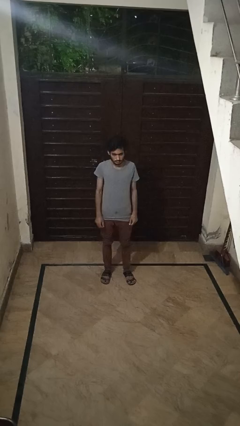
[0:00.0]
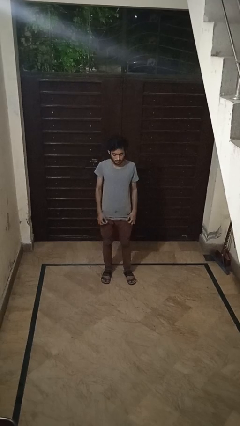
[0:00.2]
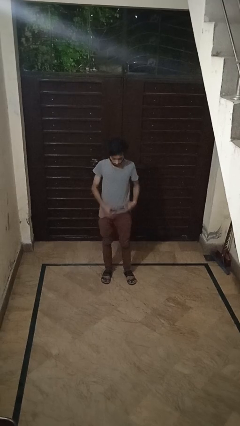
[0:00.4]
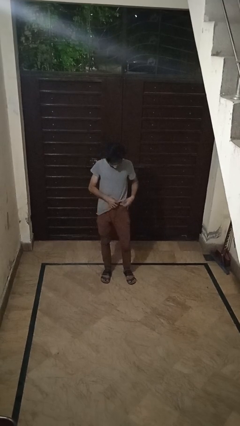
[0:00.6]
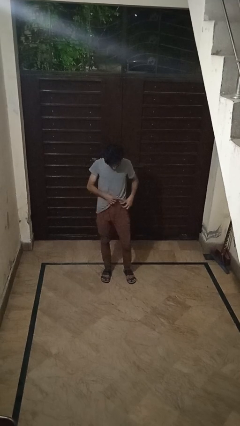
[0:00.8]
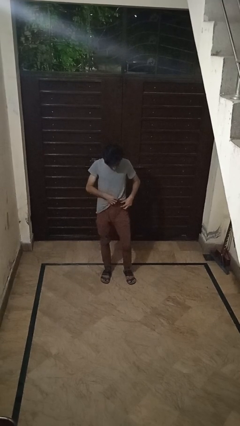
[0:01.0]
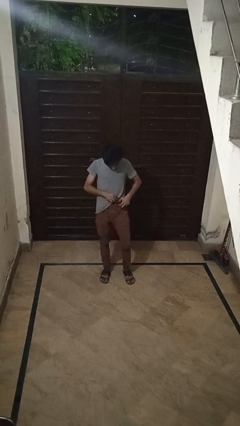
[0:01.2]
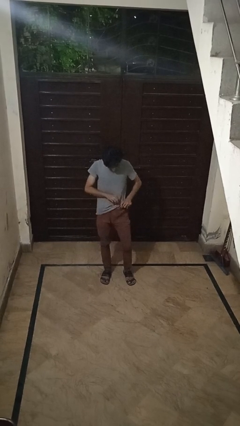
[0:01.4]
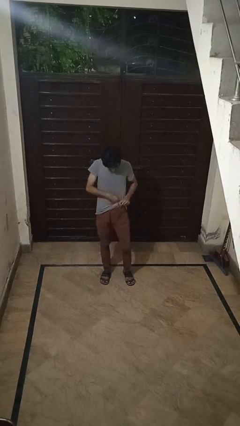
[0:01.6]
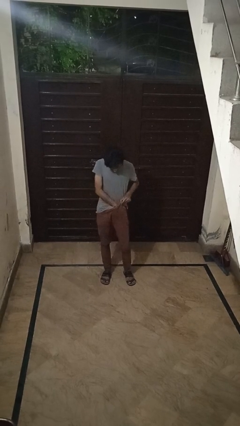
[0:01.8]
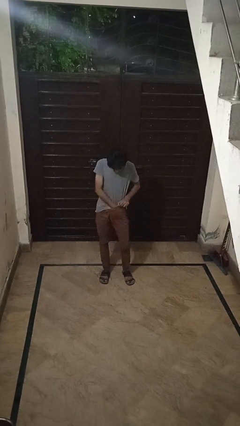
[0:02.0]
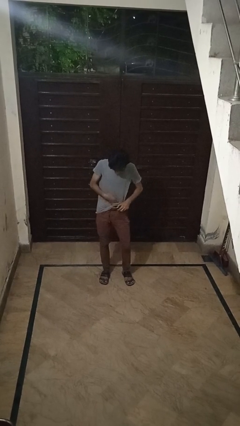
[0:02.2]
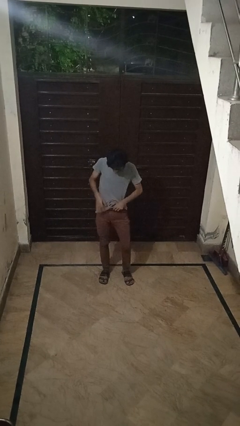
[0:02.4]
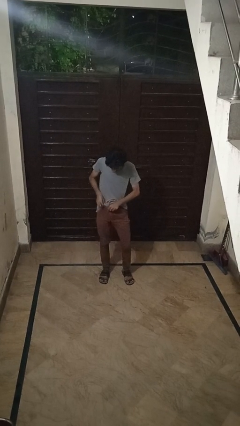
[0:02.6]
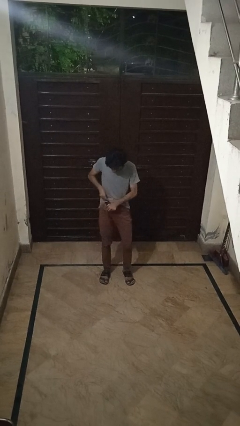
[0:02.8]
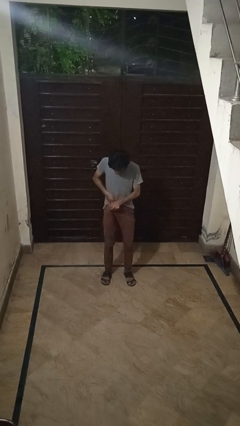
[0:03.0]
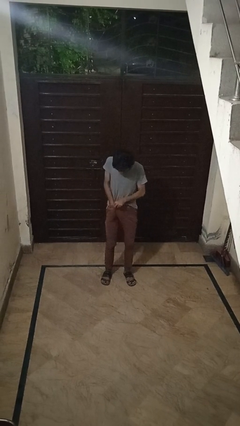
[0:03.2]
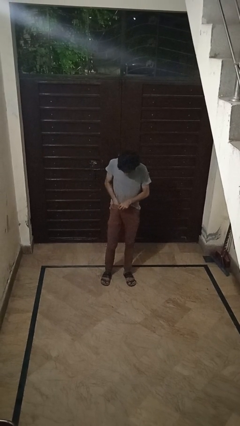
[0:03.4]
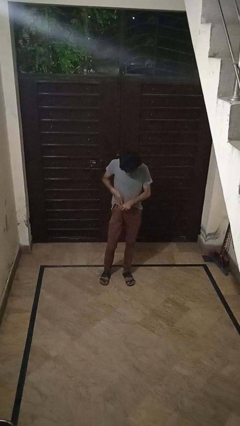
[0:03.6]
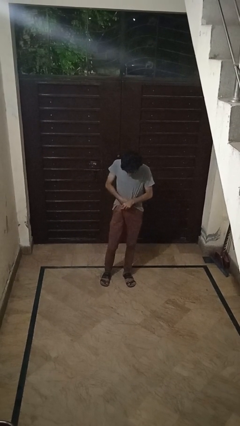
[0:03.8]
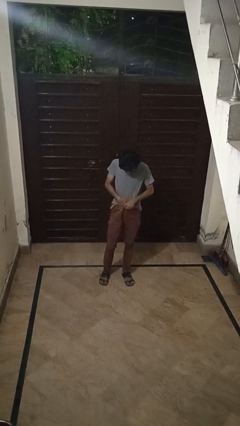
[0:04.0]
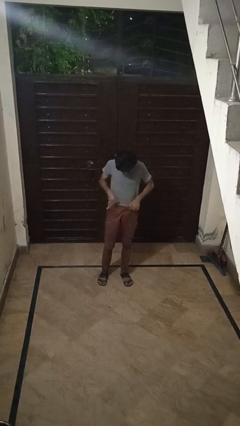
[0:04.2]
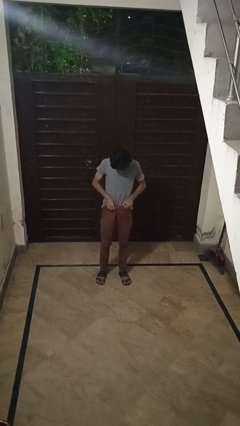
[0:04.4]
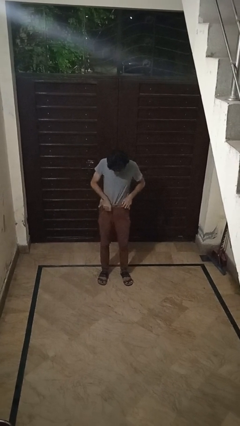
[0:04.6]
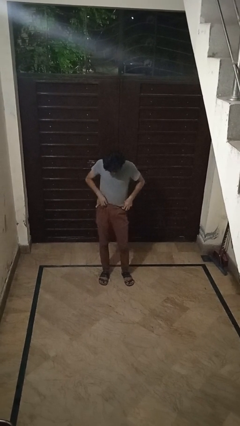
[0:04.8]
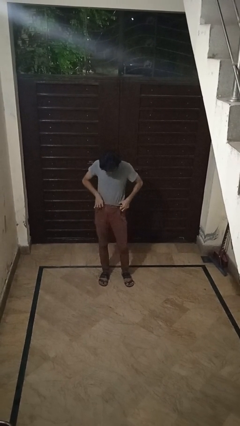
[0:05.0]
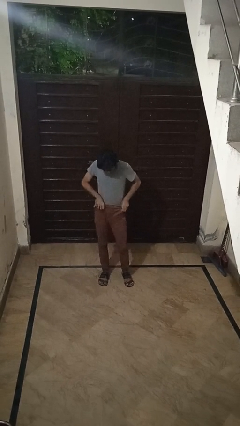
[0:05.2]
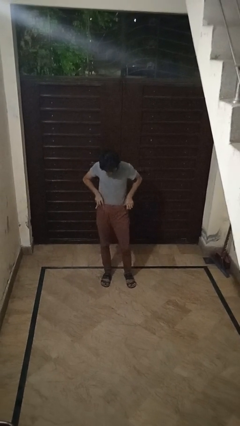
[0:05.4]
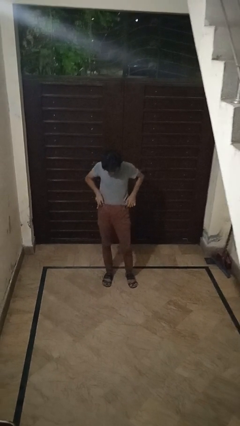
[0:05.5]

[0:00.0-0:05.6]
person tucks in shirt

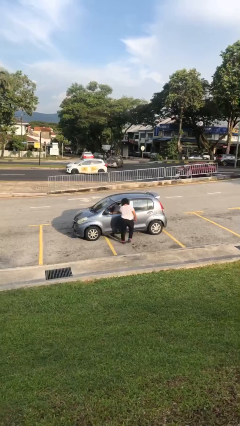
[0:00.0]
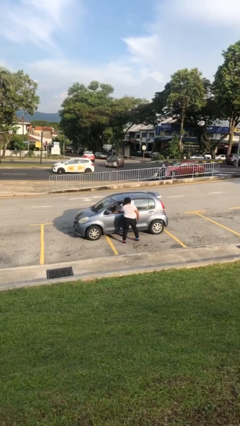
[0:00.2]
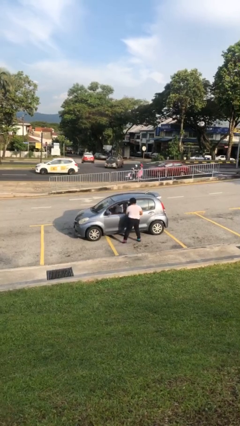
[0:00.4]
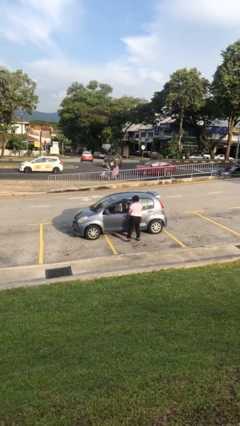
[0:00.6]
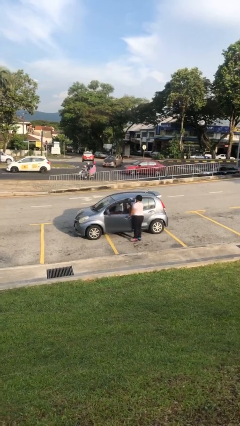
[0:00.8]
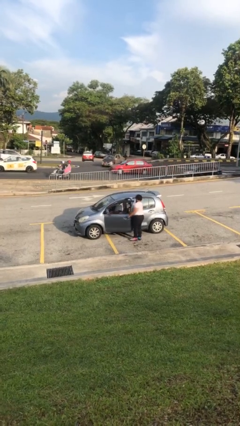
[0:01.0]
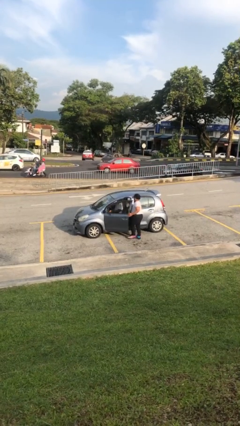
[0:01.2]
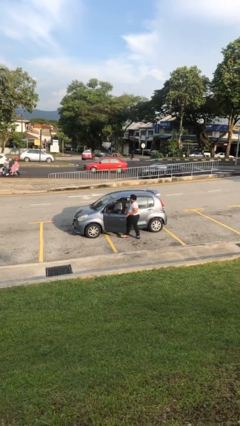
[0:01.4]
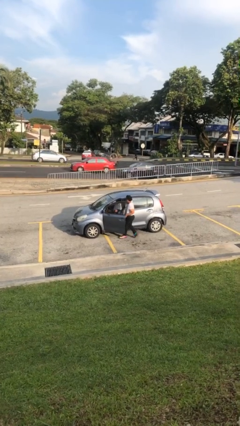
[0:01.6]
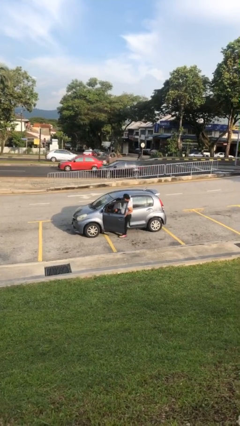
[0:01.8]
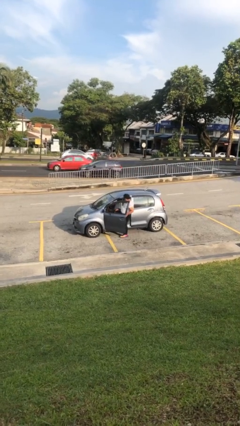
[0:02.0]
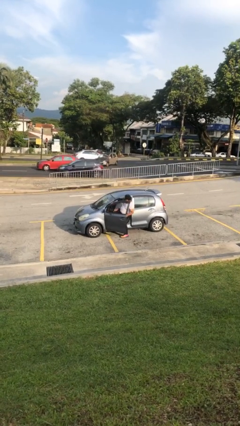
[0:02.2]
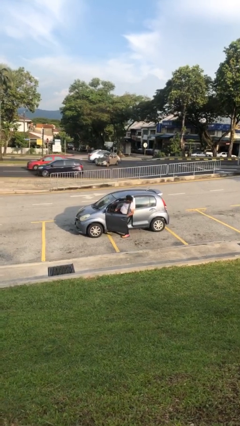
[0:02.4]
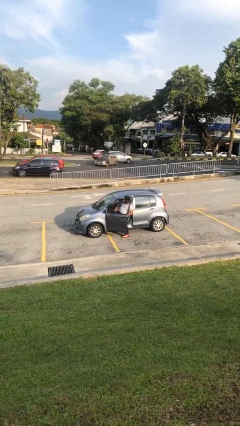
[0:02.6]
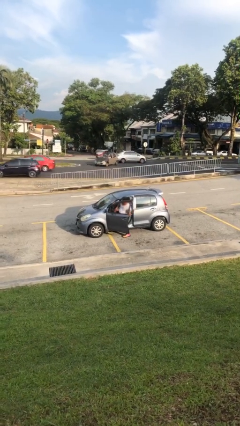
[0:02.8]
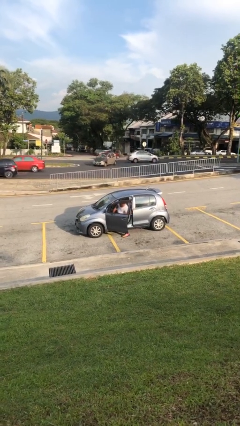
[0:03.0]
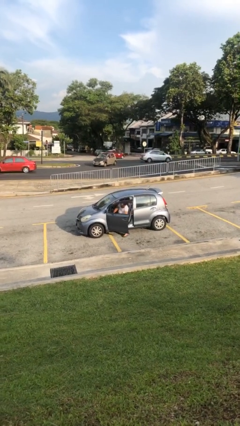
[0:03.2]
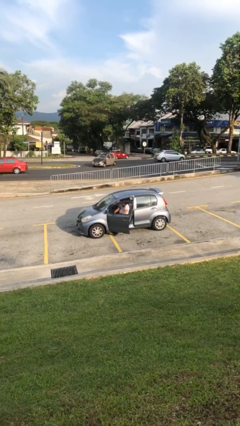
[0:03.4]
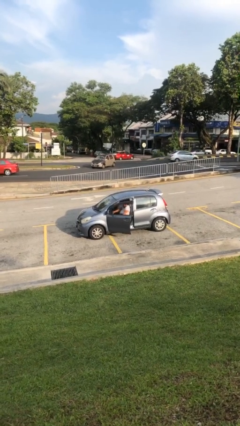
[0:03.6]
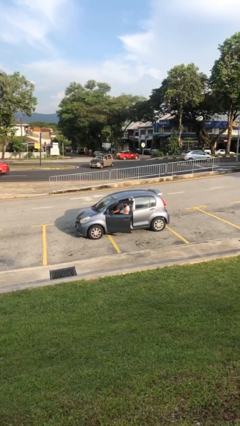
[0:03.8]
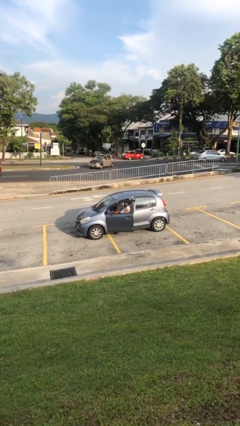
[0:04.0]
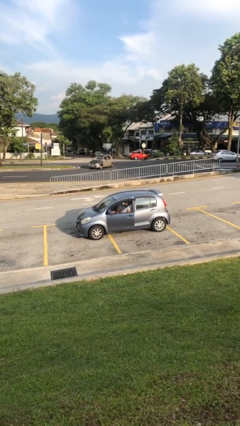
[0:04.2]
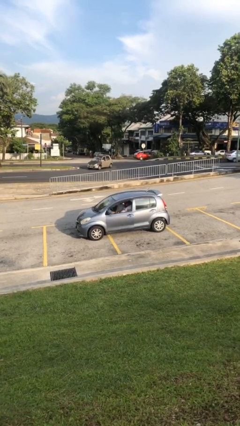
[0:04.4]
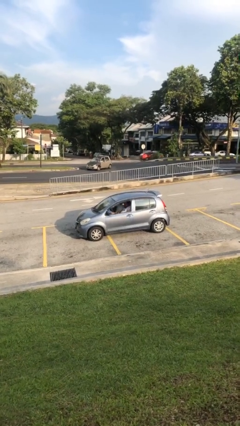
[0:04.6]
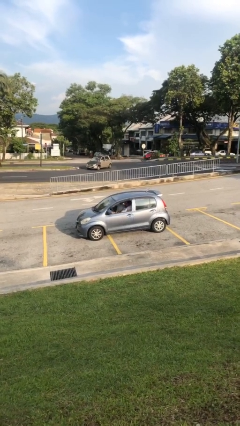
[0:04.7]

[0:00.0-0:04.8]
car picks up person

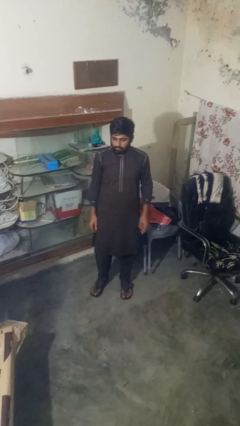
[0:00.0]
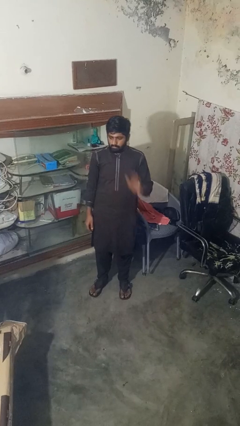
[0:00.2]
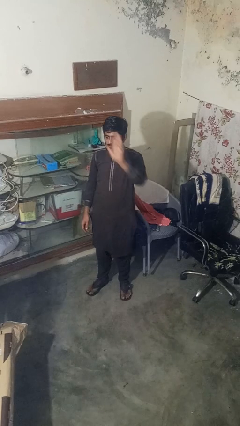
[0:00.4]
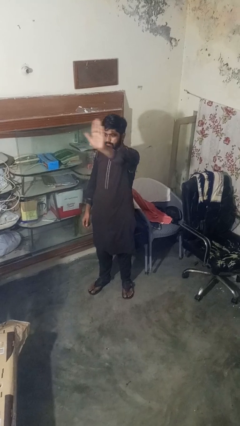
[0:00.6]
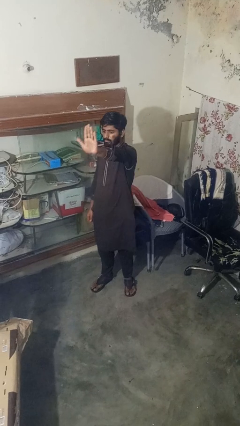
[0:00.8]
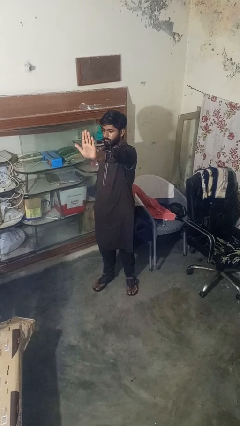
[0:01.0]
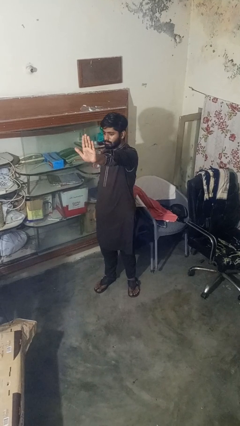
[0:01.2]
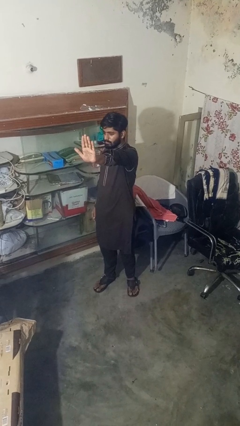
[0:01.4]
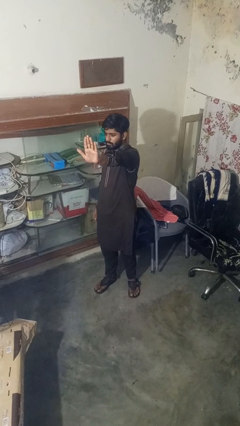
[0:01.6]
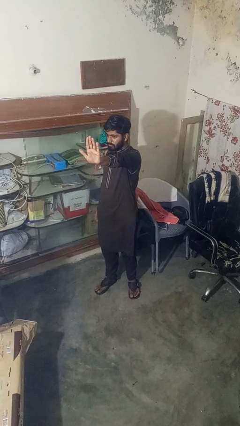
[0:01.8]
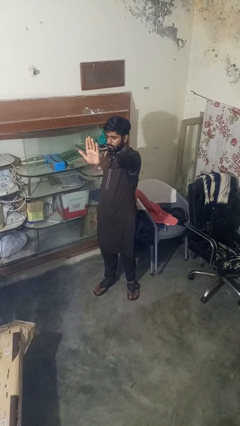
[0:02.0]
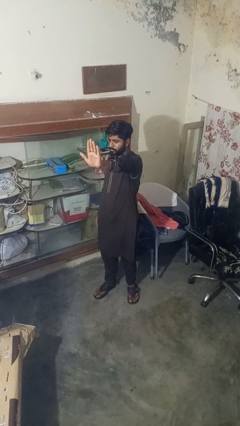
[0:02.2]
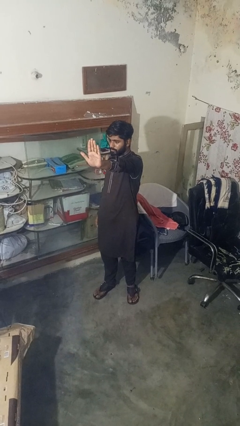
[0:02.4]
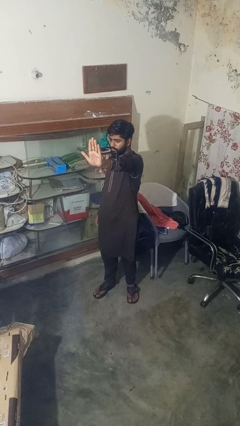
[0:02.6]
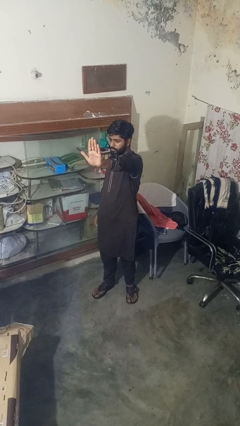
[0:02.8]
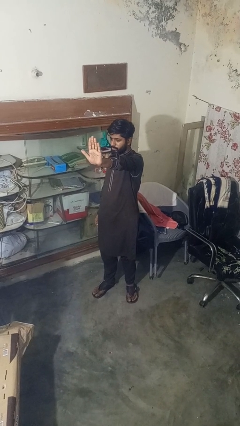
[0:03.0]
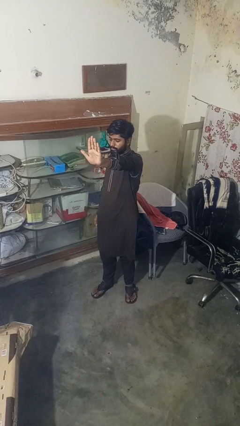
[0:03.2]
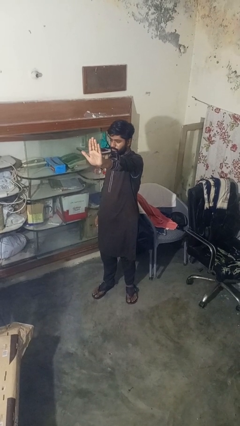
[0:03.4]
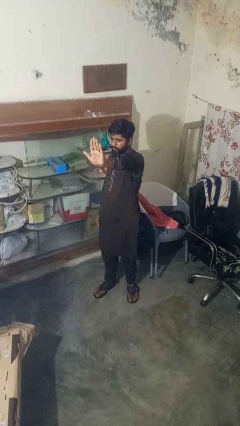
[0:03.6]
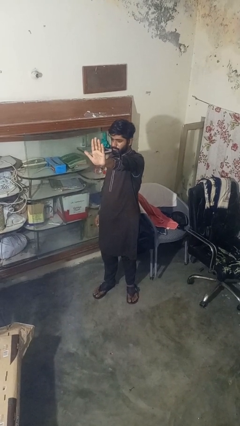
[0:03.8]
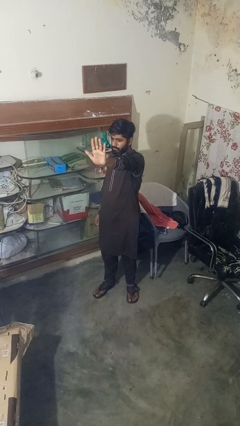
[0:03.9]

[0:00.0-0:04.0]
person gestures stop

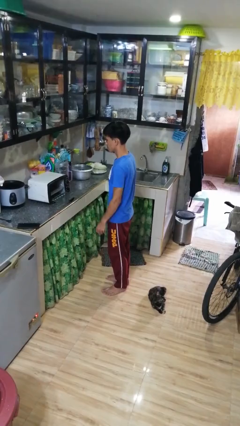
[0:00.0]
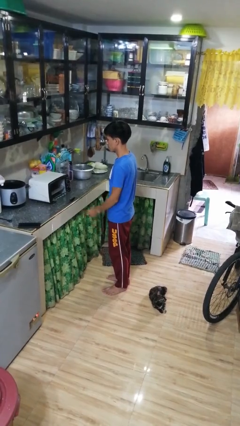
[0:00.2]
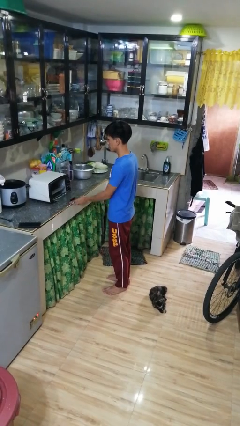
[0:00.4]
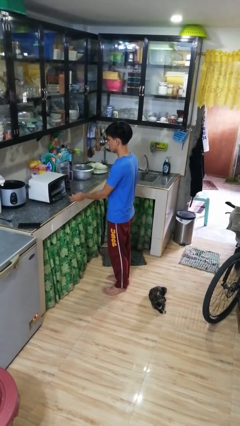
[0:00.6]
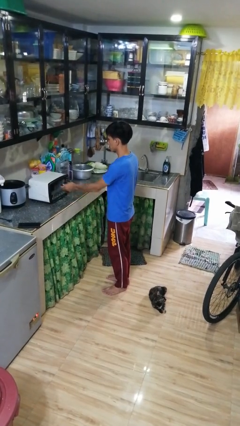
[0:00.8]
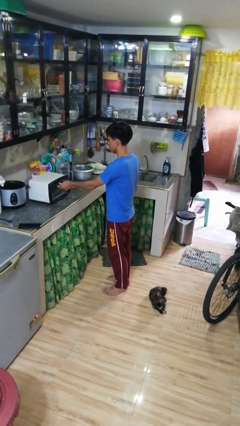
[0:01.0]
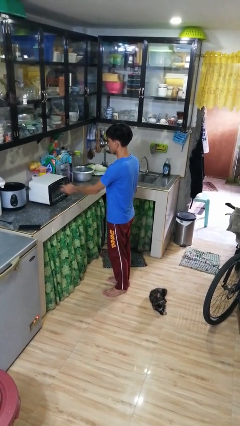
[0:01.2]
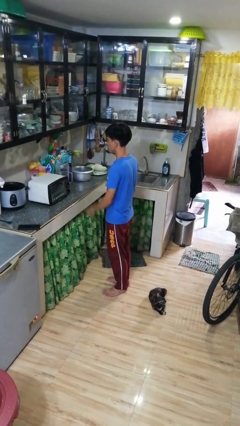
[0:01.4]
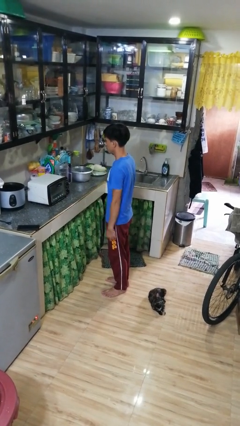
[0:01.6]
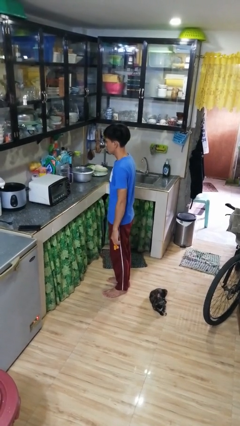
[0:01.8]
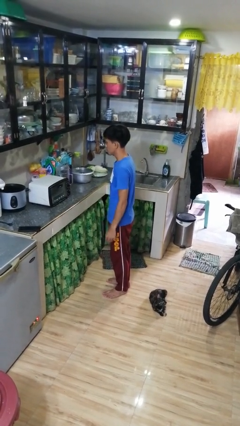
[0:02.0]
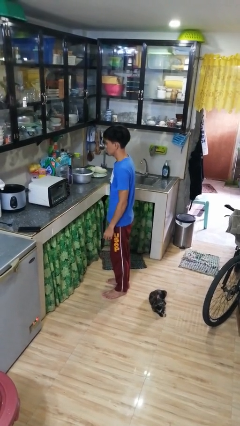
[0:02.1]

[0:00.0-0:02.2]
person closes microwave

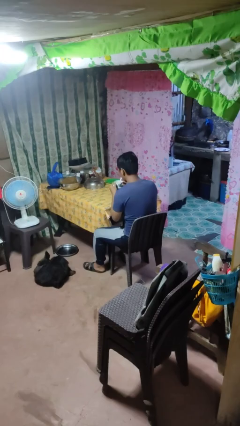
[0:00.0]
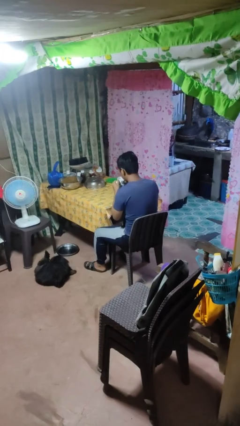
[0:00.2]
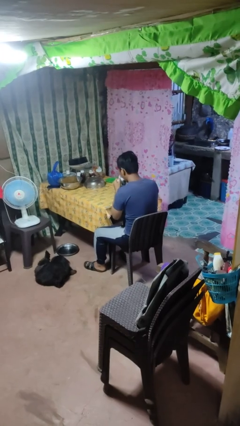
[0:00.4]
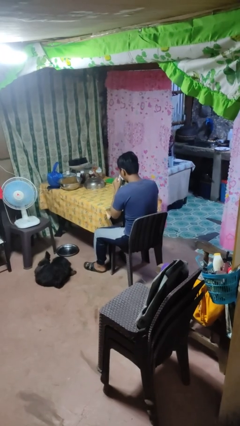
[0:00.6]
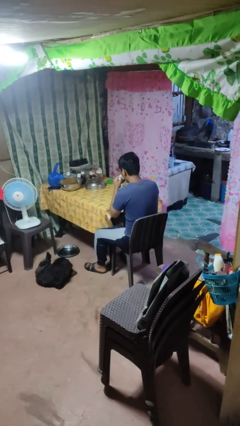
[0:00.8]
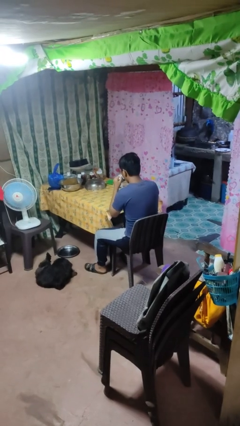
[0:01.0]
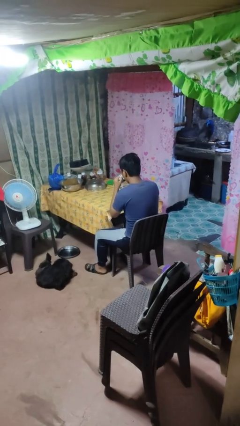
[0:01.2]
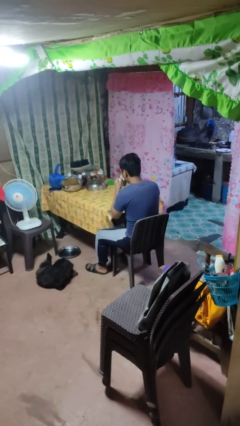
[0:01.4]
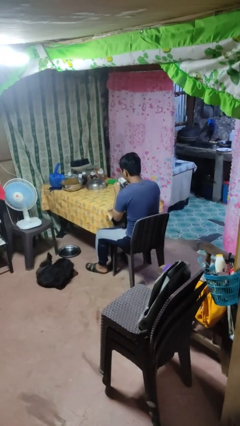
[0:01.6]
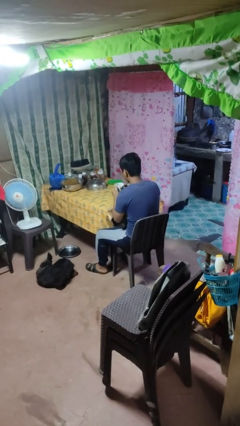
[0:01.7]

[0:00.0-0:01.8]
person drinks from mug
